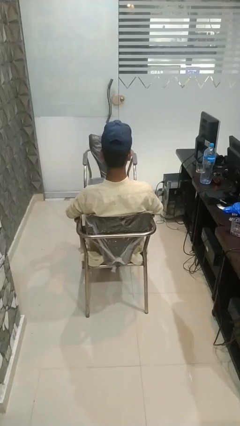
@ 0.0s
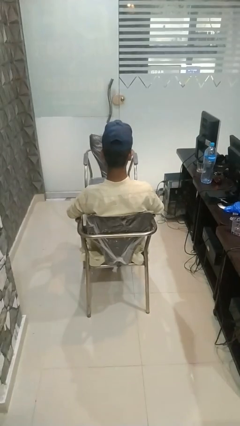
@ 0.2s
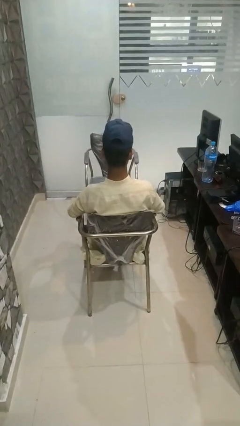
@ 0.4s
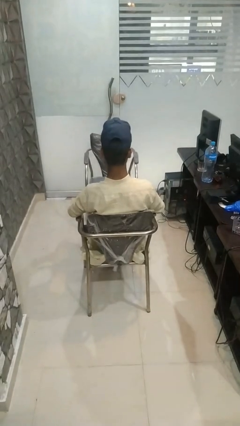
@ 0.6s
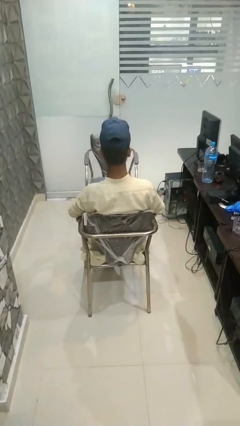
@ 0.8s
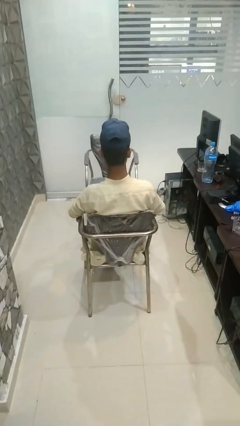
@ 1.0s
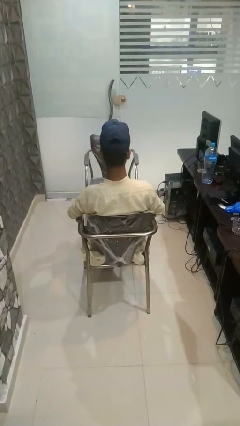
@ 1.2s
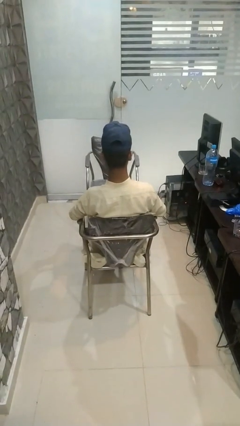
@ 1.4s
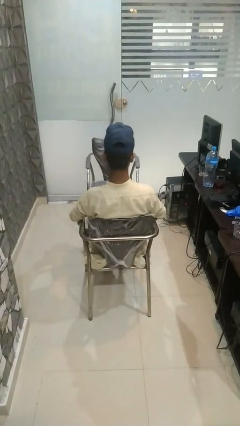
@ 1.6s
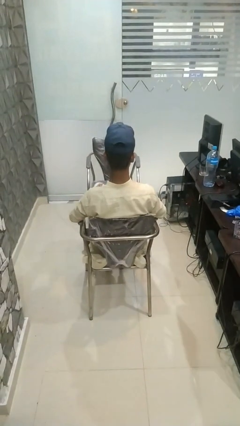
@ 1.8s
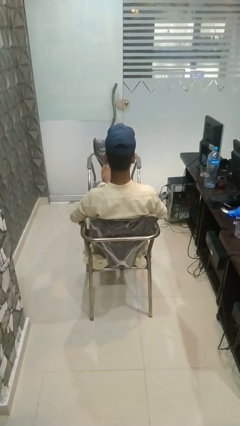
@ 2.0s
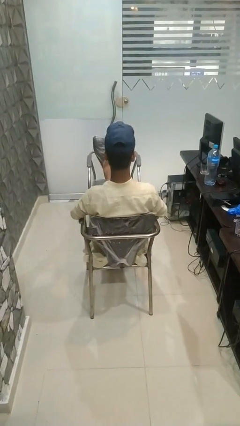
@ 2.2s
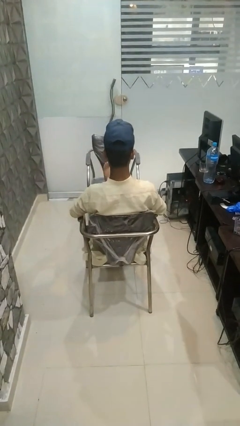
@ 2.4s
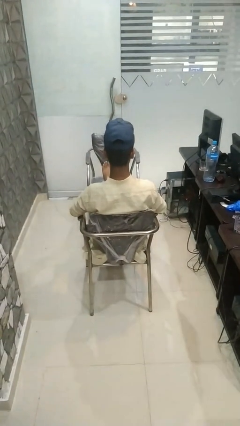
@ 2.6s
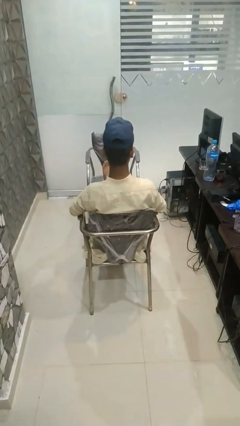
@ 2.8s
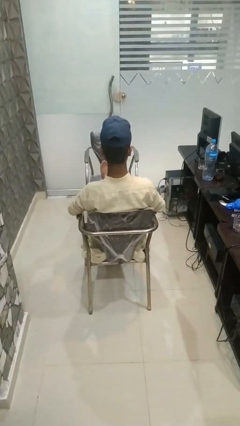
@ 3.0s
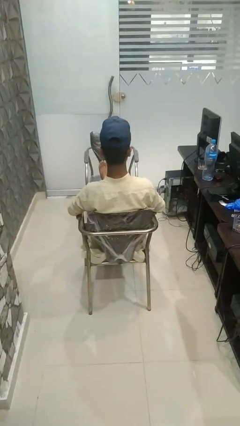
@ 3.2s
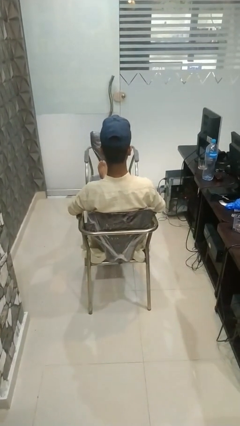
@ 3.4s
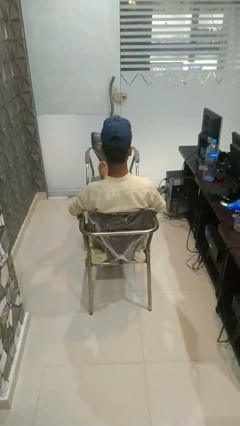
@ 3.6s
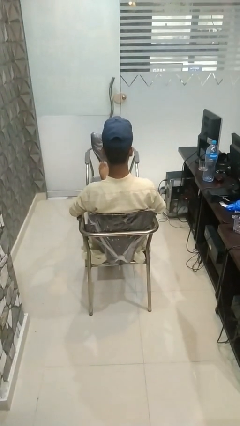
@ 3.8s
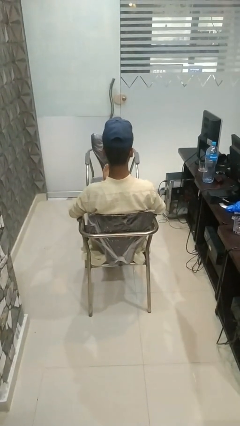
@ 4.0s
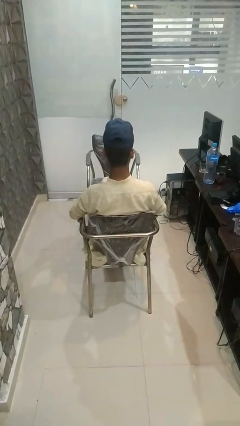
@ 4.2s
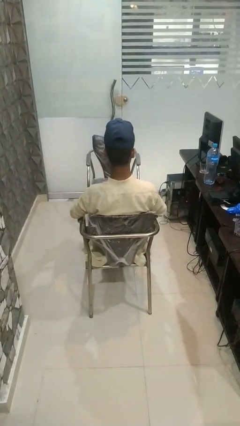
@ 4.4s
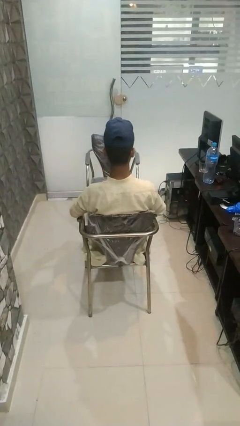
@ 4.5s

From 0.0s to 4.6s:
person puts feet up

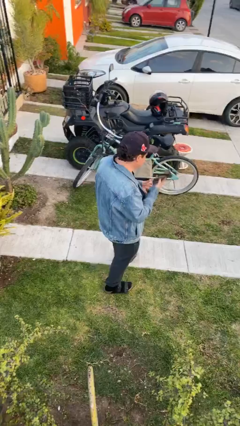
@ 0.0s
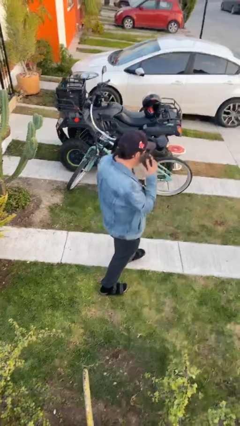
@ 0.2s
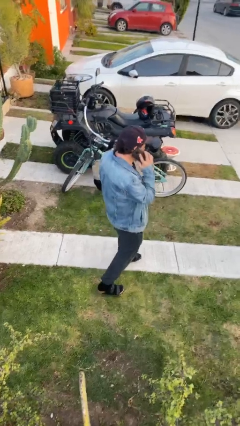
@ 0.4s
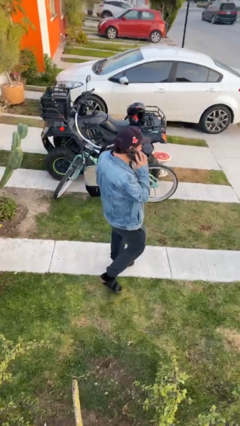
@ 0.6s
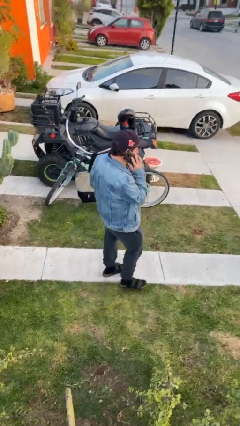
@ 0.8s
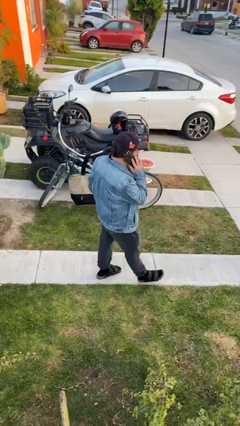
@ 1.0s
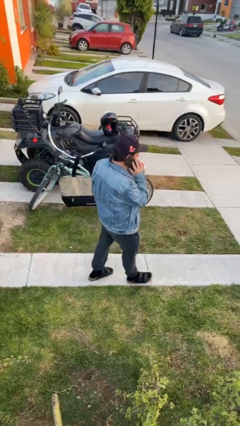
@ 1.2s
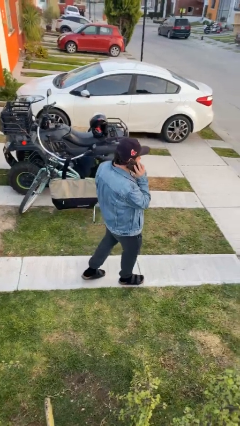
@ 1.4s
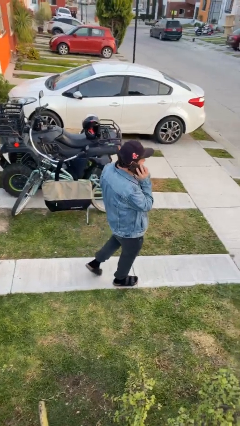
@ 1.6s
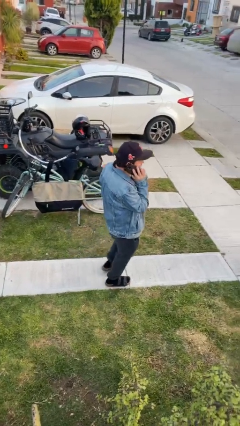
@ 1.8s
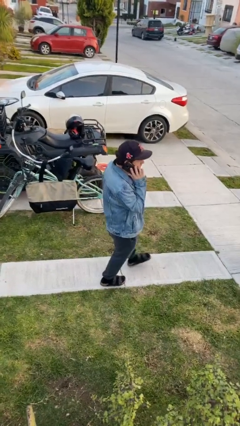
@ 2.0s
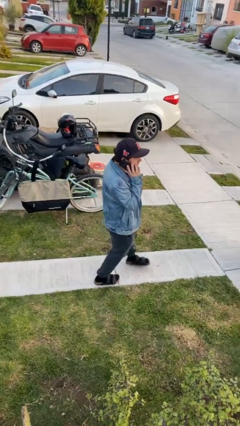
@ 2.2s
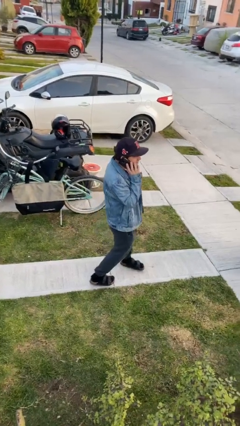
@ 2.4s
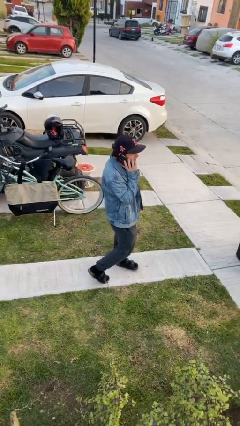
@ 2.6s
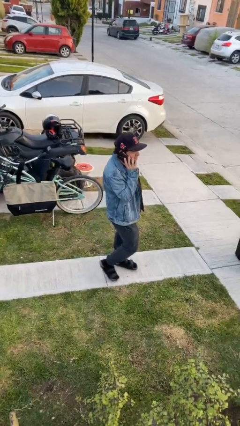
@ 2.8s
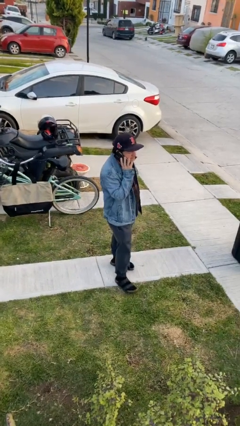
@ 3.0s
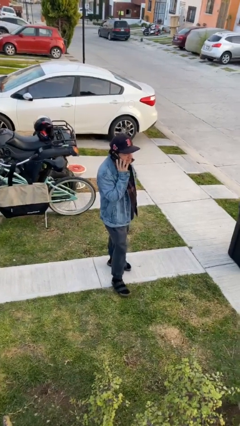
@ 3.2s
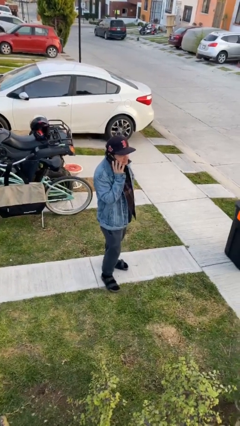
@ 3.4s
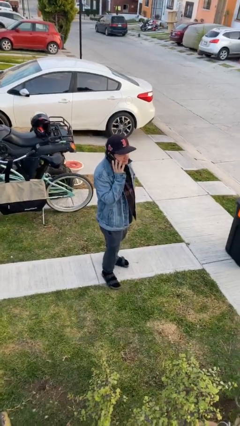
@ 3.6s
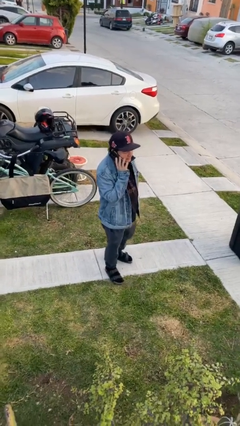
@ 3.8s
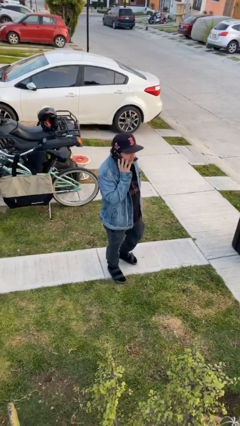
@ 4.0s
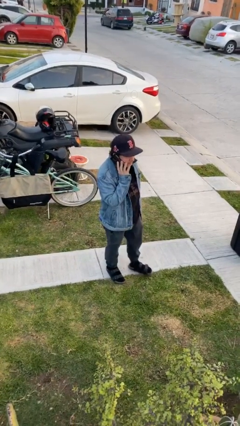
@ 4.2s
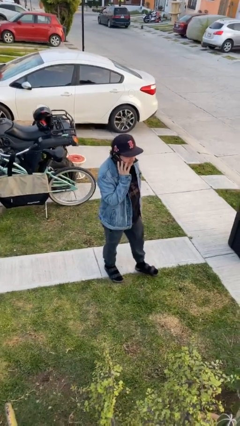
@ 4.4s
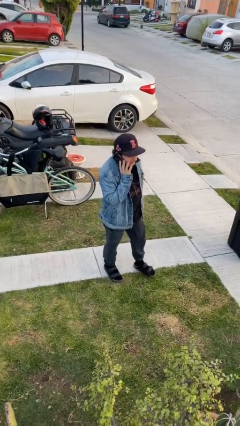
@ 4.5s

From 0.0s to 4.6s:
person talks on phone

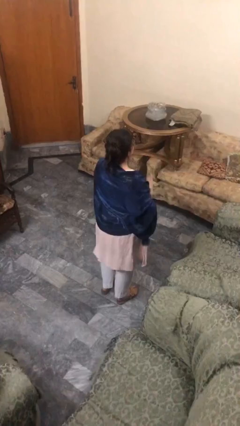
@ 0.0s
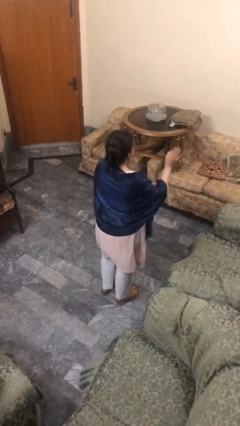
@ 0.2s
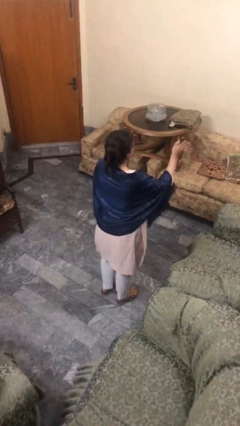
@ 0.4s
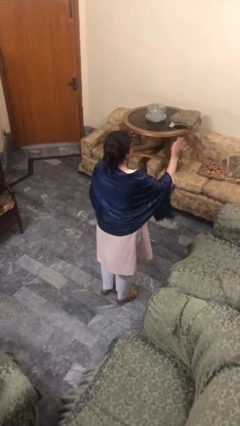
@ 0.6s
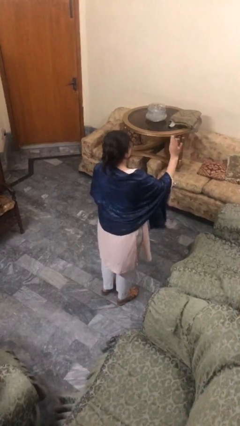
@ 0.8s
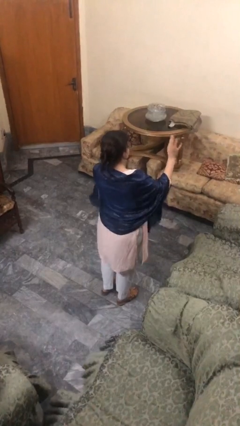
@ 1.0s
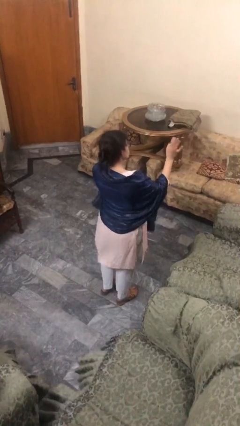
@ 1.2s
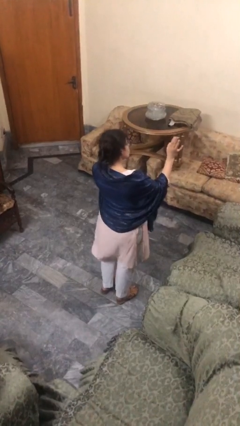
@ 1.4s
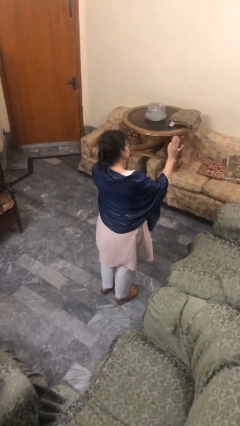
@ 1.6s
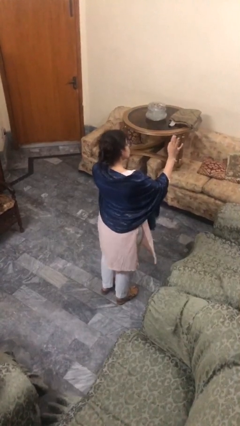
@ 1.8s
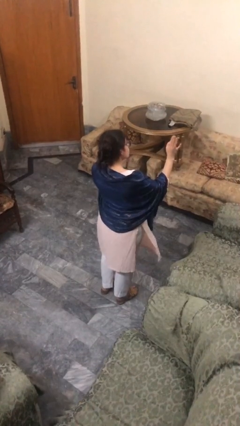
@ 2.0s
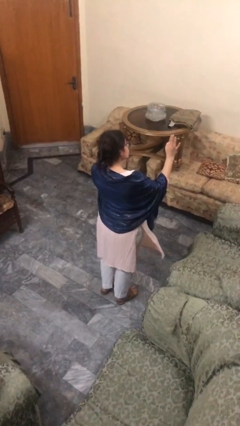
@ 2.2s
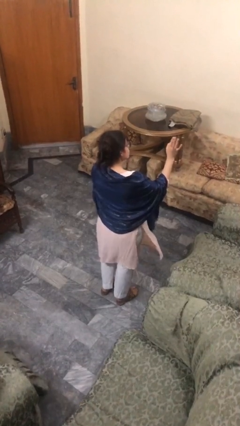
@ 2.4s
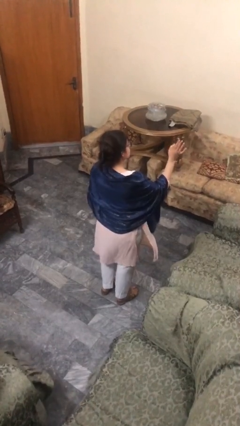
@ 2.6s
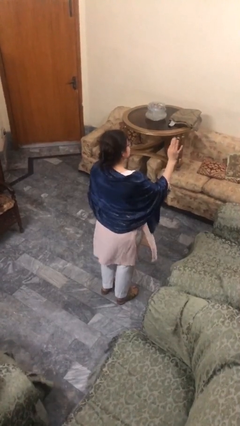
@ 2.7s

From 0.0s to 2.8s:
person waves at person

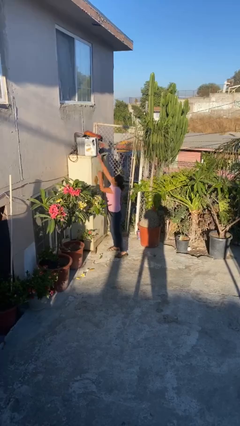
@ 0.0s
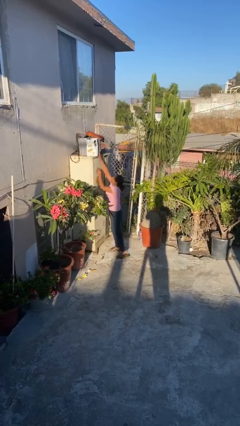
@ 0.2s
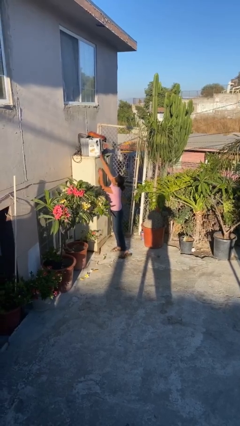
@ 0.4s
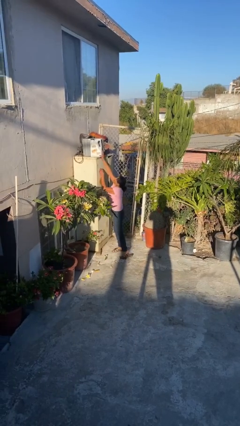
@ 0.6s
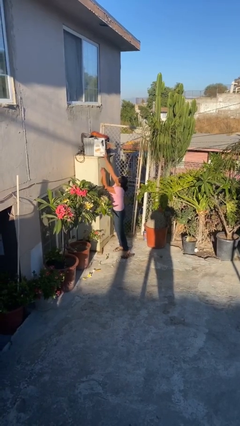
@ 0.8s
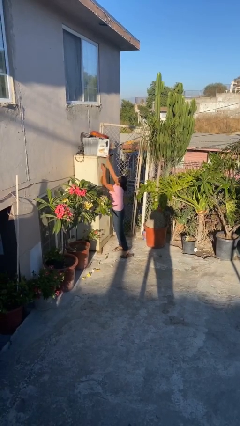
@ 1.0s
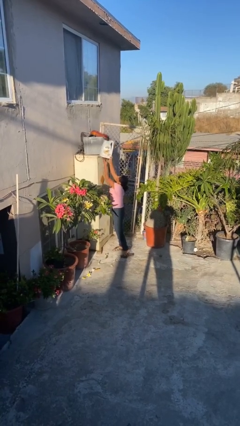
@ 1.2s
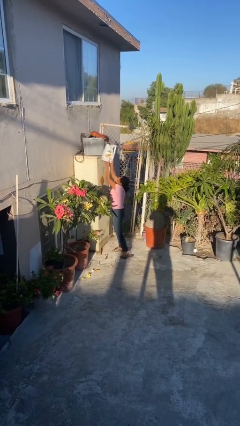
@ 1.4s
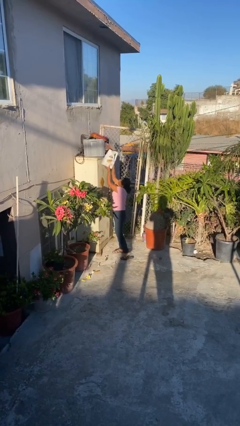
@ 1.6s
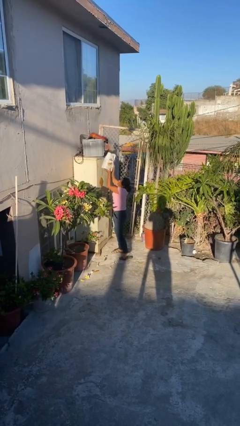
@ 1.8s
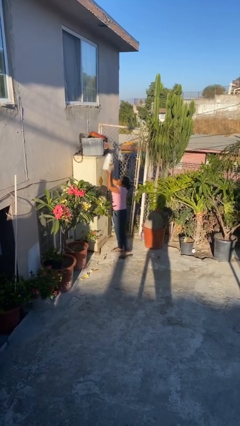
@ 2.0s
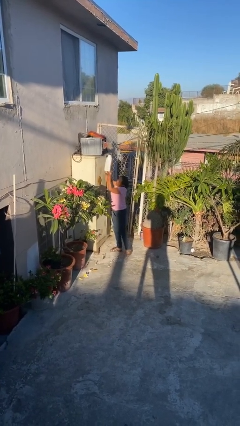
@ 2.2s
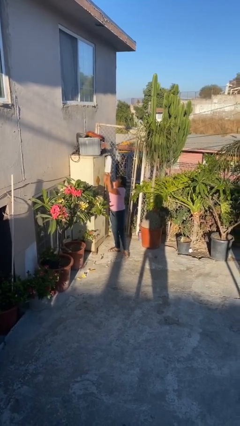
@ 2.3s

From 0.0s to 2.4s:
person picks up object from shelf

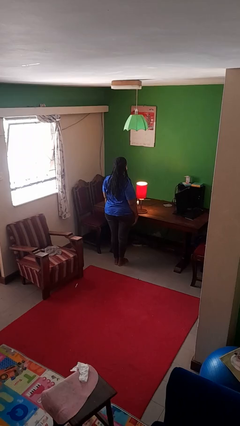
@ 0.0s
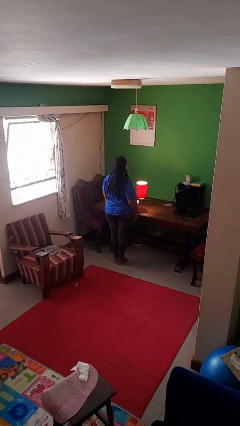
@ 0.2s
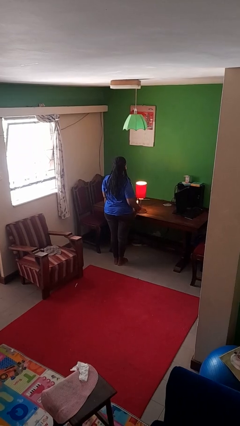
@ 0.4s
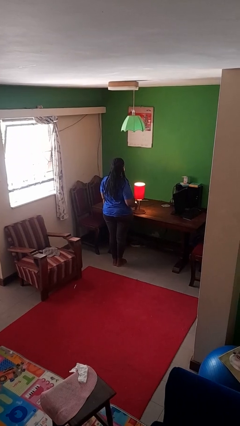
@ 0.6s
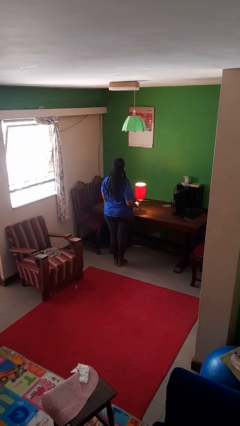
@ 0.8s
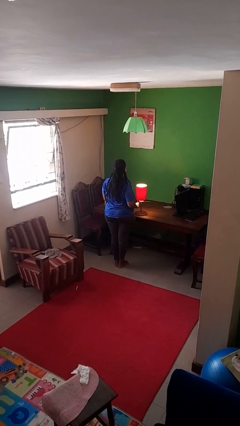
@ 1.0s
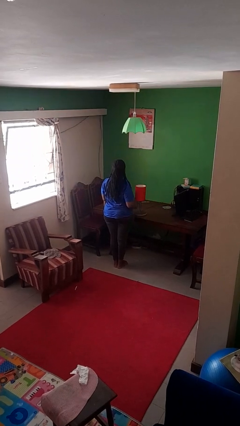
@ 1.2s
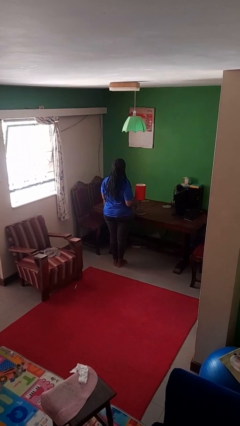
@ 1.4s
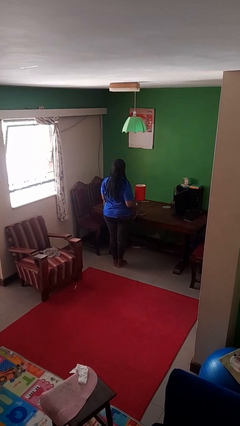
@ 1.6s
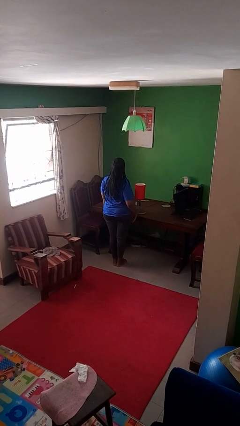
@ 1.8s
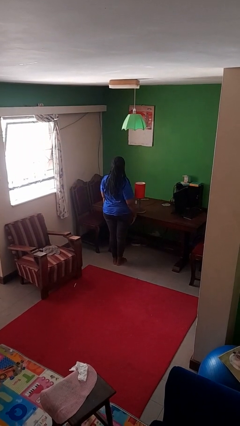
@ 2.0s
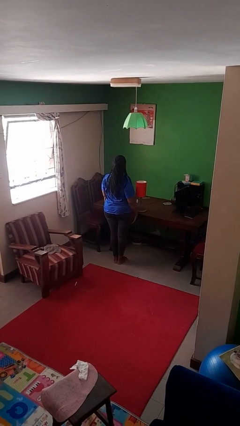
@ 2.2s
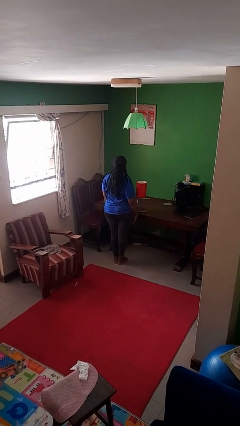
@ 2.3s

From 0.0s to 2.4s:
person turns off lamp

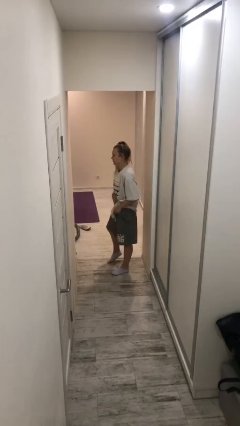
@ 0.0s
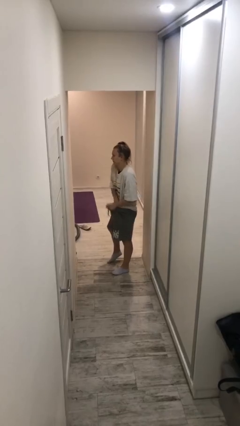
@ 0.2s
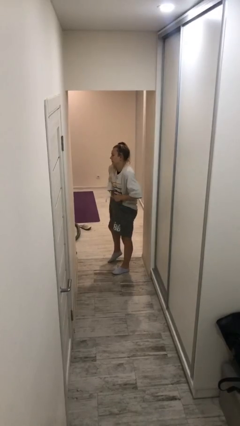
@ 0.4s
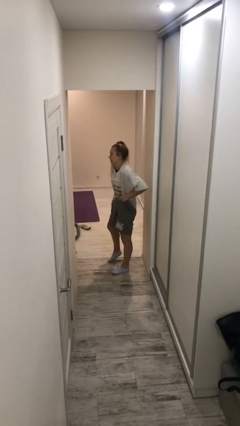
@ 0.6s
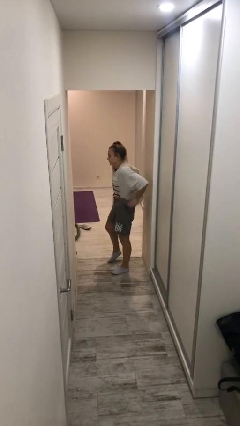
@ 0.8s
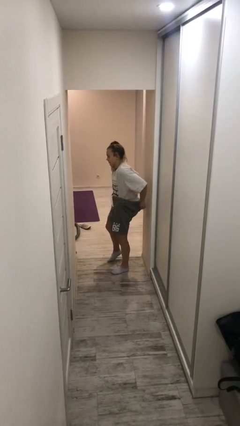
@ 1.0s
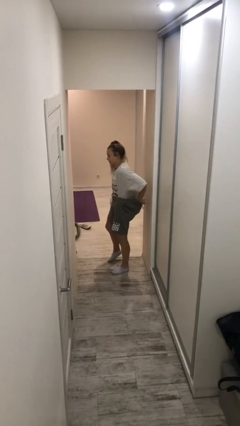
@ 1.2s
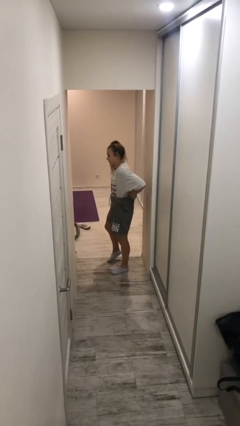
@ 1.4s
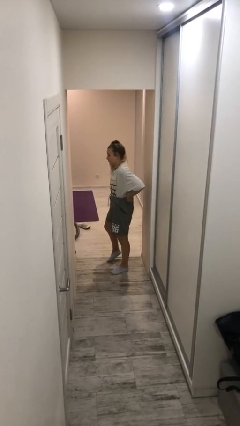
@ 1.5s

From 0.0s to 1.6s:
person tucks in shirt
